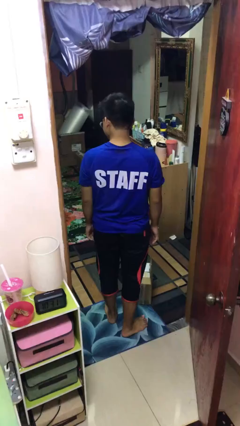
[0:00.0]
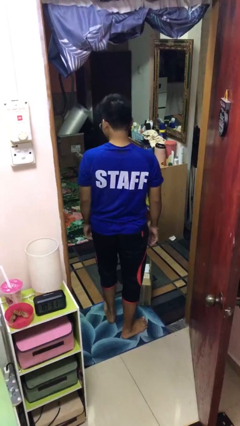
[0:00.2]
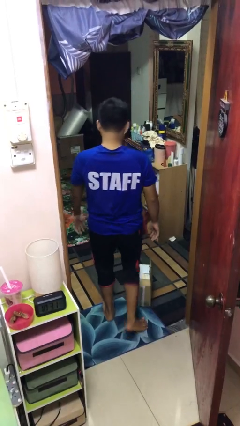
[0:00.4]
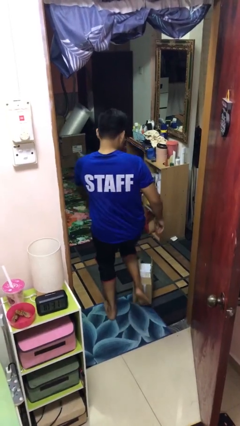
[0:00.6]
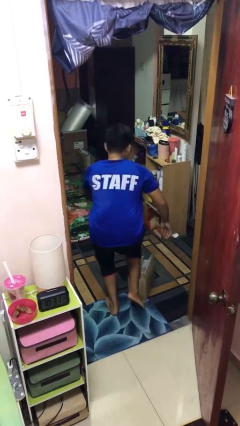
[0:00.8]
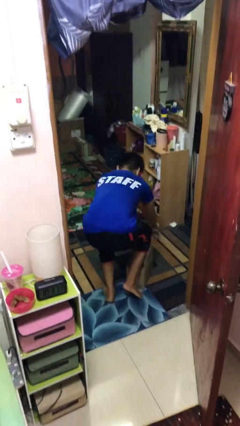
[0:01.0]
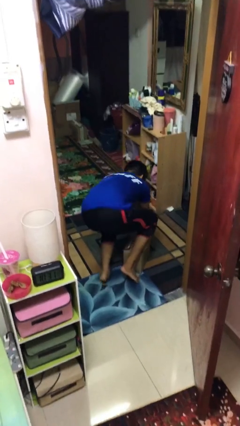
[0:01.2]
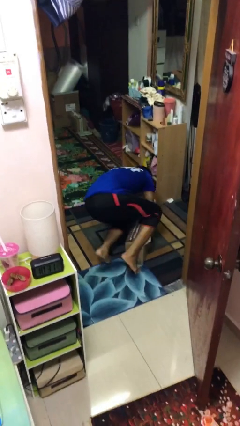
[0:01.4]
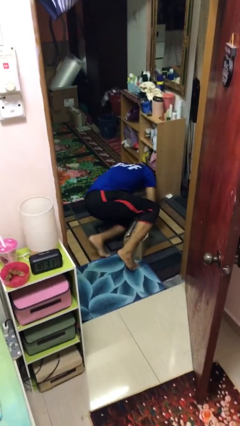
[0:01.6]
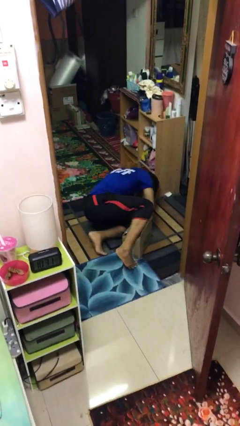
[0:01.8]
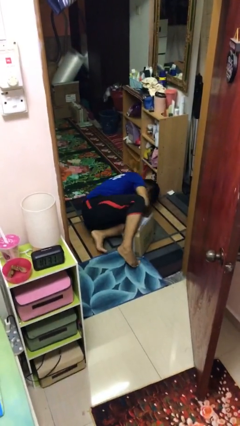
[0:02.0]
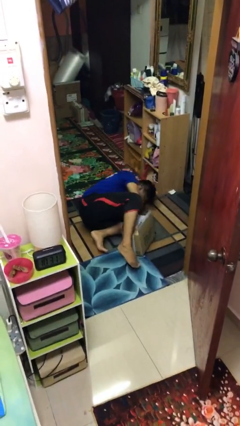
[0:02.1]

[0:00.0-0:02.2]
person trips on object on floor

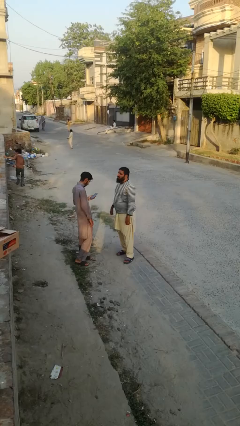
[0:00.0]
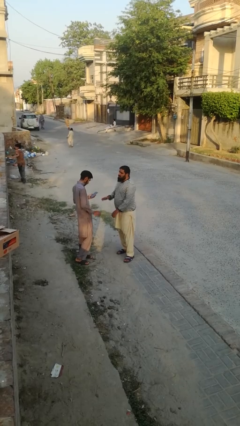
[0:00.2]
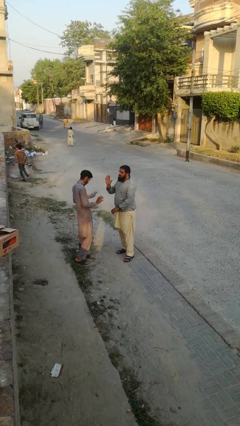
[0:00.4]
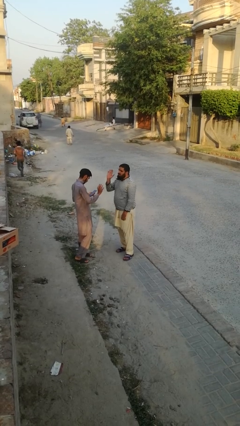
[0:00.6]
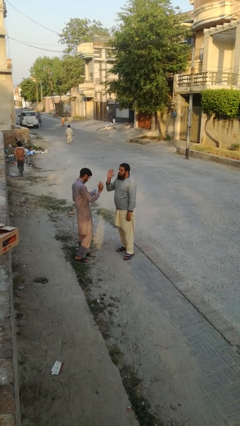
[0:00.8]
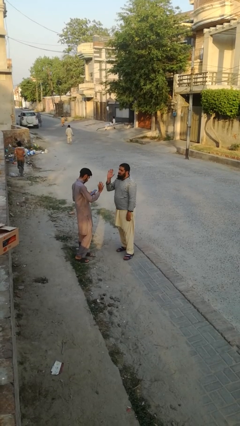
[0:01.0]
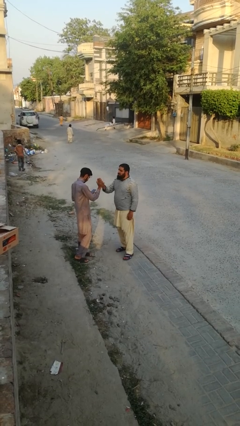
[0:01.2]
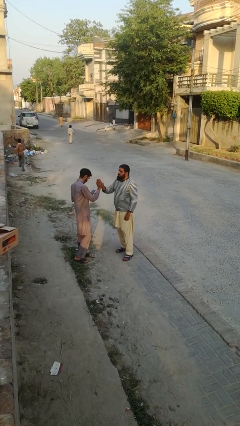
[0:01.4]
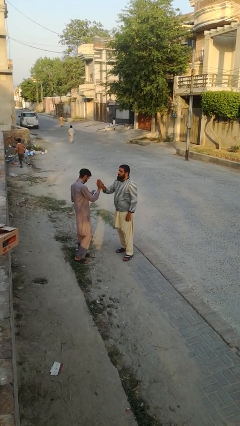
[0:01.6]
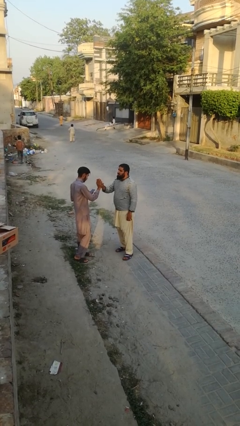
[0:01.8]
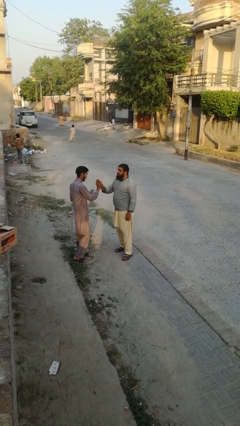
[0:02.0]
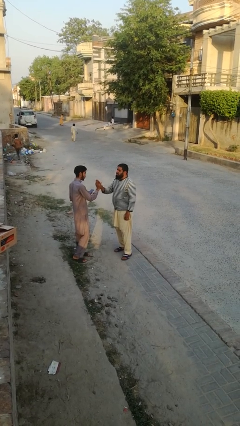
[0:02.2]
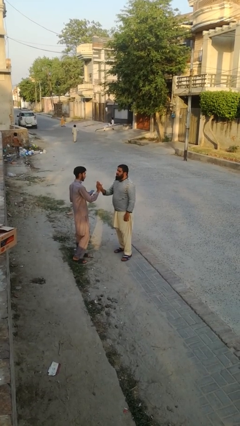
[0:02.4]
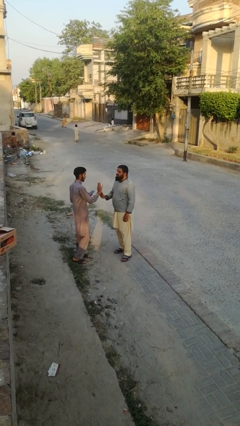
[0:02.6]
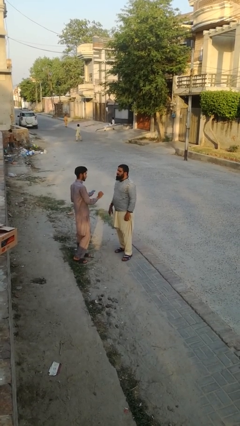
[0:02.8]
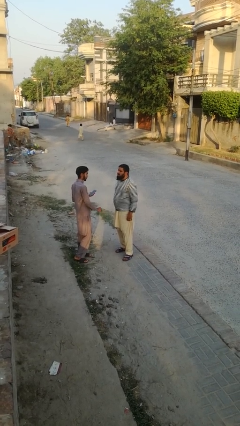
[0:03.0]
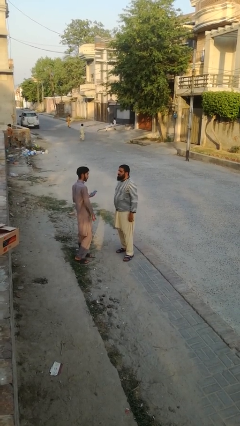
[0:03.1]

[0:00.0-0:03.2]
person highfives hand

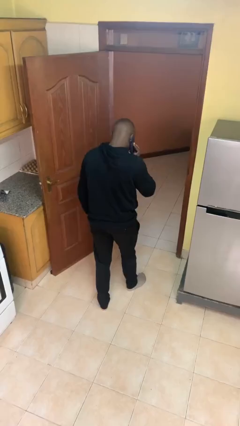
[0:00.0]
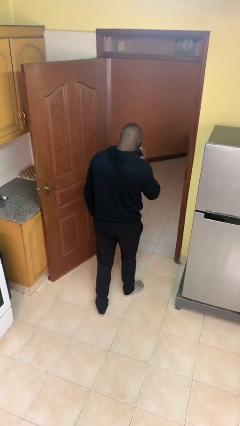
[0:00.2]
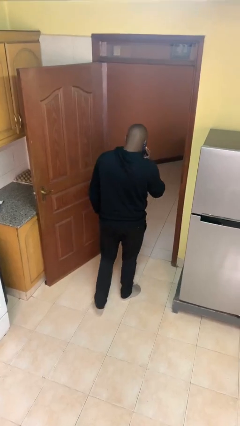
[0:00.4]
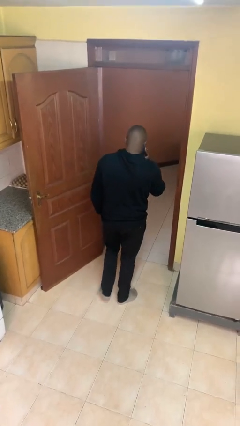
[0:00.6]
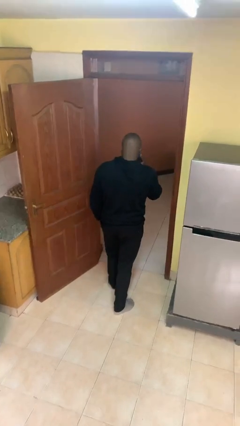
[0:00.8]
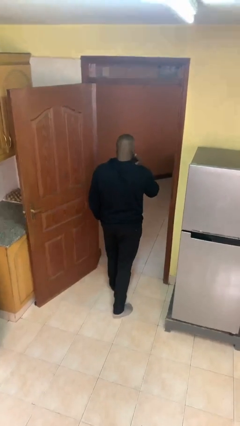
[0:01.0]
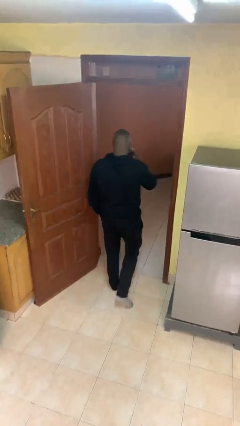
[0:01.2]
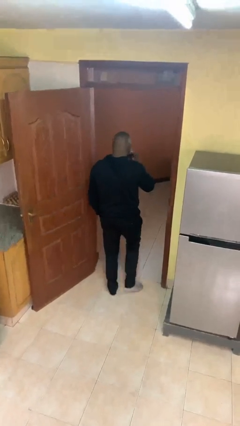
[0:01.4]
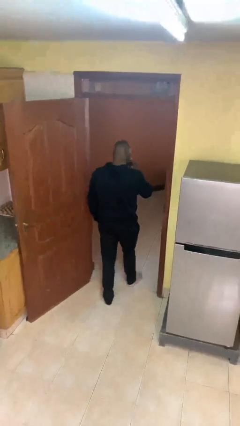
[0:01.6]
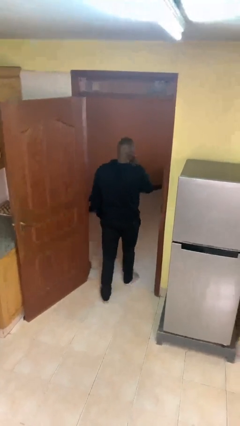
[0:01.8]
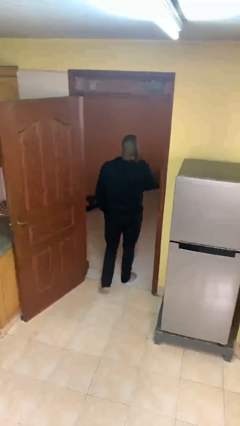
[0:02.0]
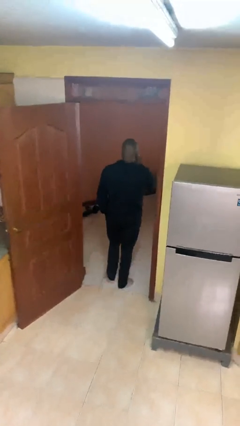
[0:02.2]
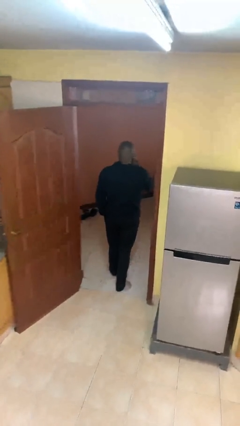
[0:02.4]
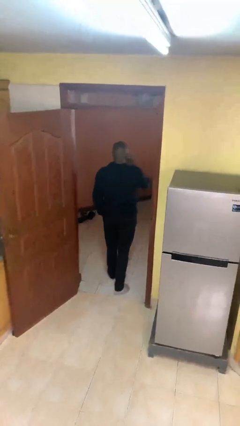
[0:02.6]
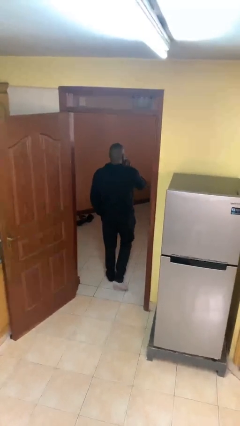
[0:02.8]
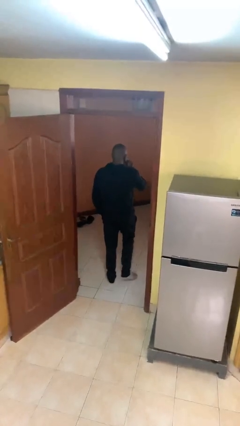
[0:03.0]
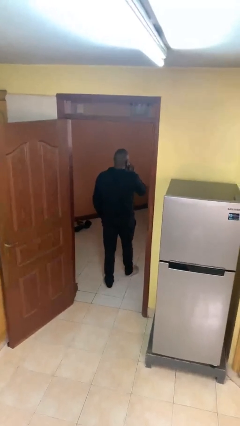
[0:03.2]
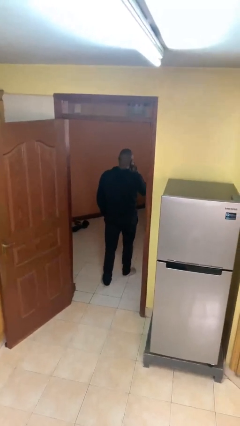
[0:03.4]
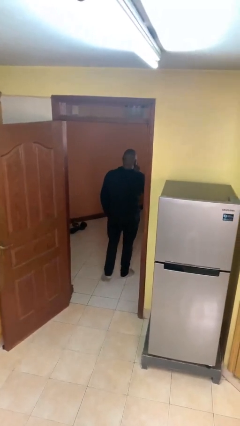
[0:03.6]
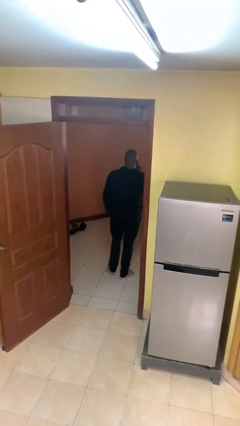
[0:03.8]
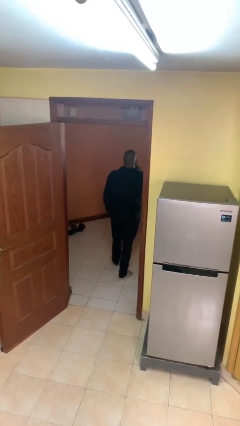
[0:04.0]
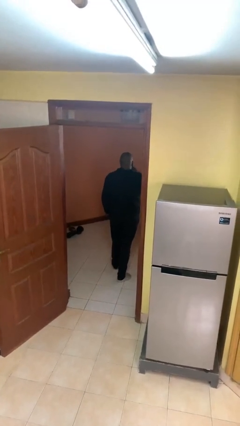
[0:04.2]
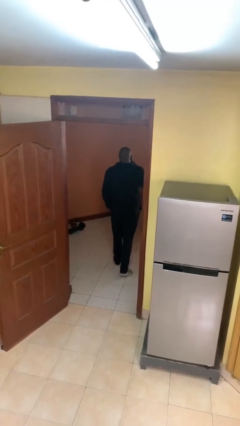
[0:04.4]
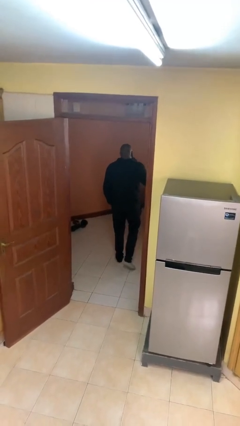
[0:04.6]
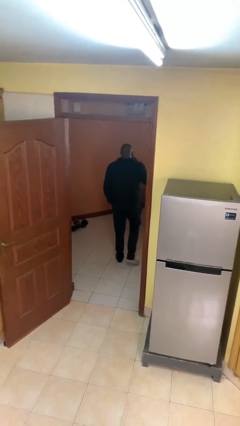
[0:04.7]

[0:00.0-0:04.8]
person exits scene through structure

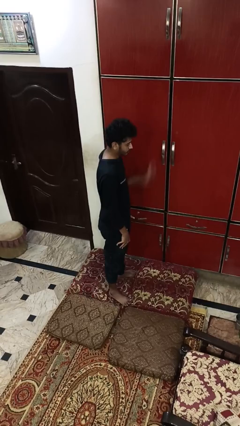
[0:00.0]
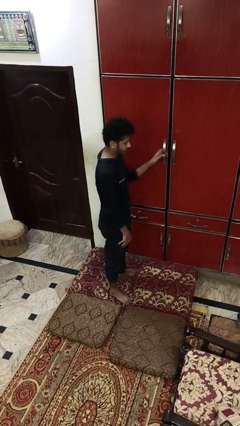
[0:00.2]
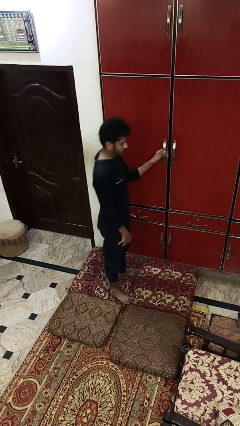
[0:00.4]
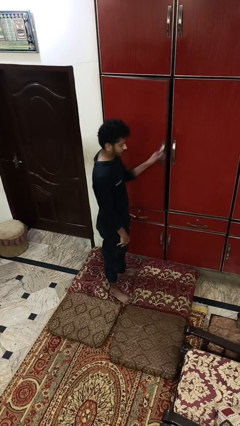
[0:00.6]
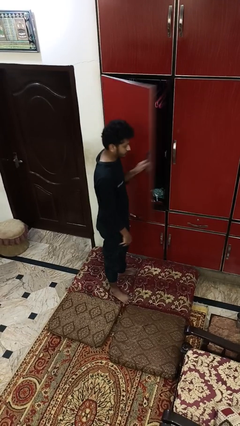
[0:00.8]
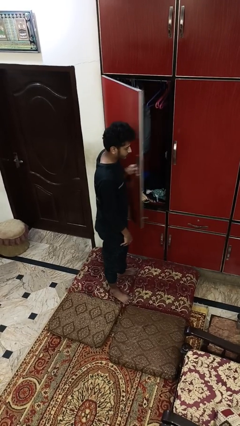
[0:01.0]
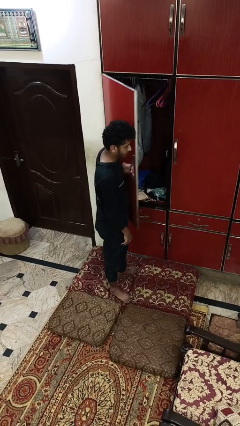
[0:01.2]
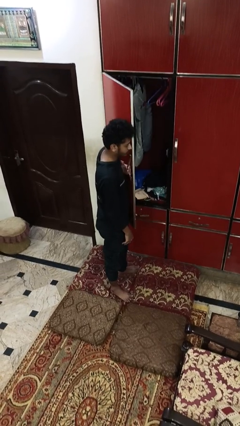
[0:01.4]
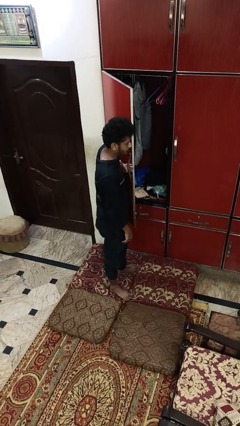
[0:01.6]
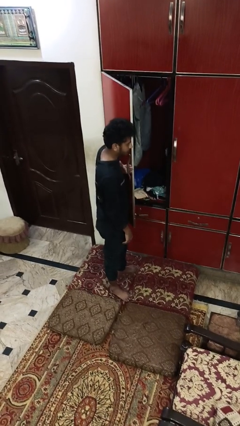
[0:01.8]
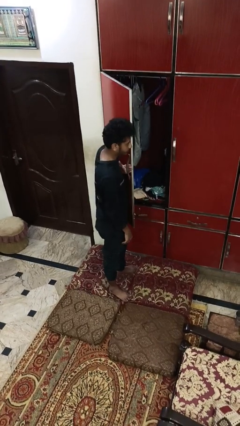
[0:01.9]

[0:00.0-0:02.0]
person opens closet door

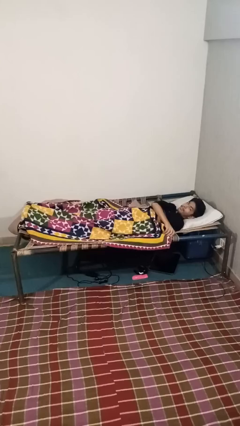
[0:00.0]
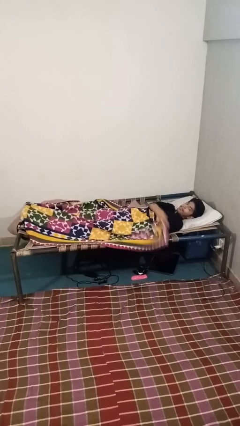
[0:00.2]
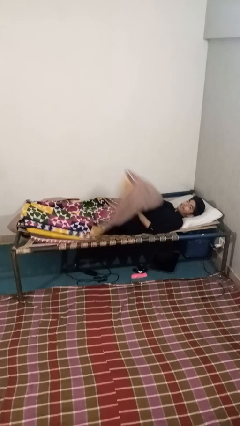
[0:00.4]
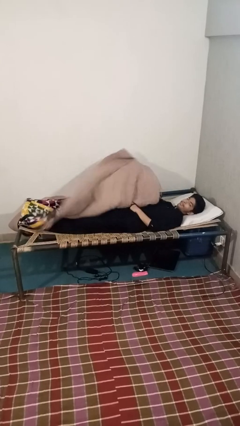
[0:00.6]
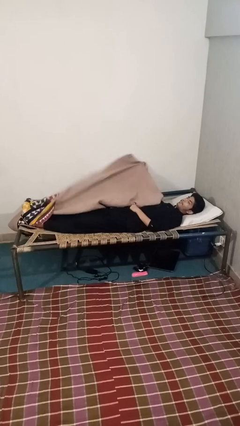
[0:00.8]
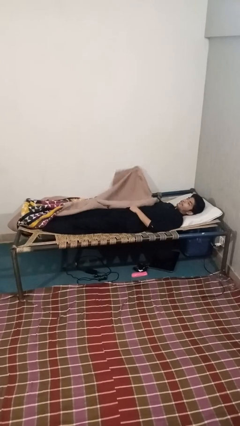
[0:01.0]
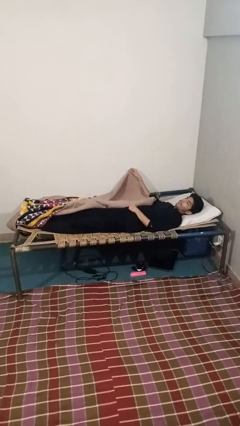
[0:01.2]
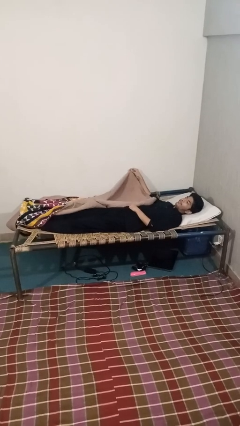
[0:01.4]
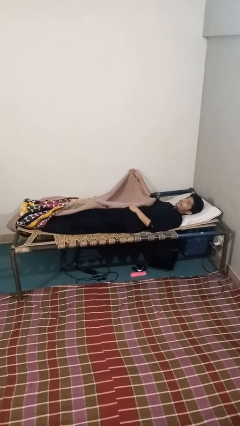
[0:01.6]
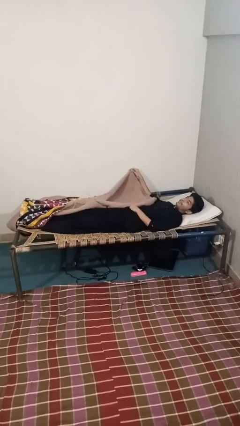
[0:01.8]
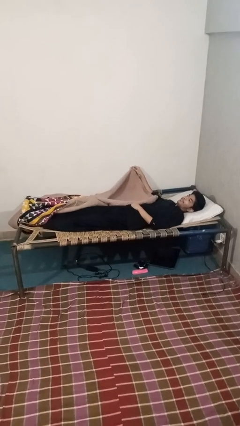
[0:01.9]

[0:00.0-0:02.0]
person uncovers with bedsheets

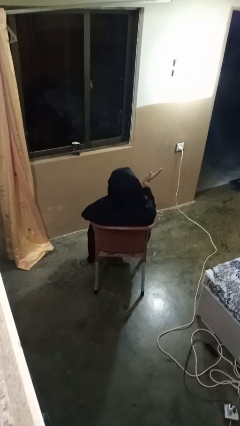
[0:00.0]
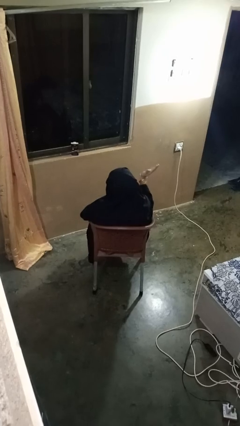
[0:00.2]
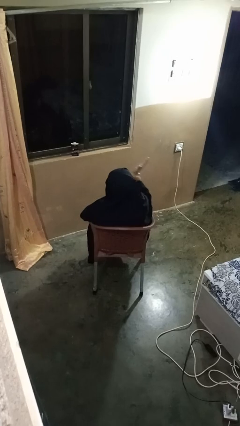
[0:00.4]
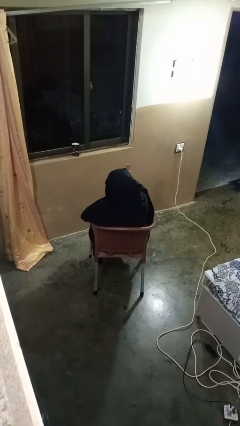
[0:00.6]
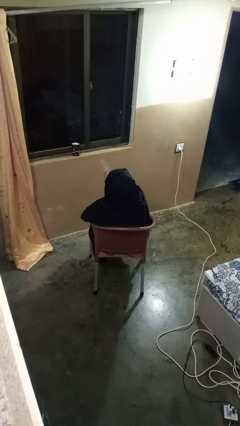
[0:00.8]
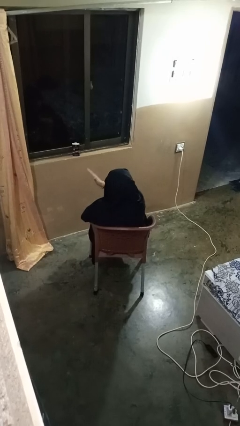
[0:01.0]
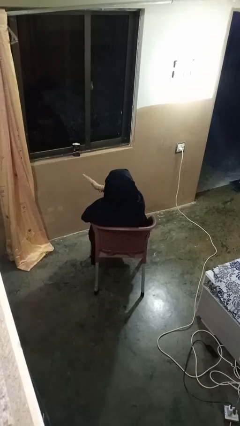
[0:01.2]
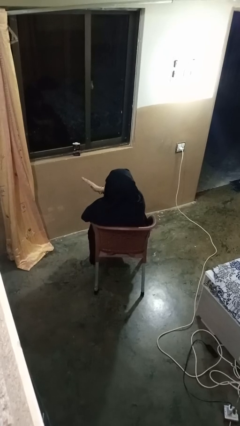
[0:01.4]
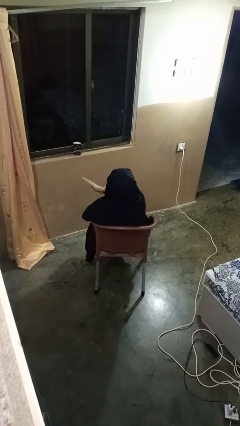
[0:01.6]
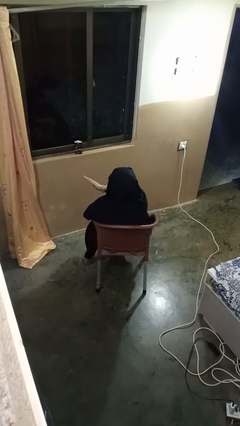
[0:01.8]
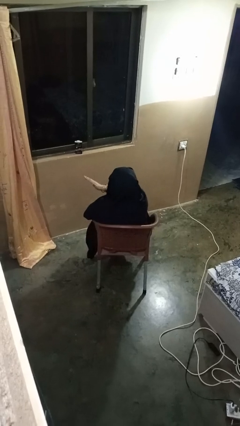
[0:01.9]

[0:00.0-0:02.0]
person gestures swipe left

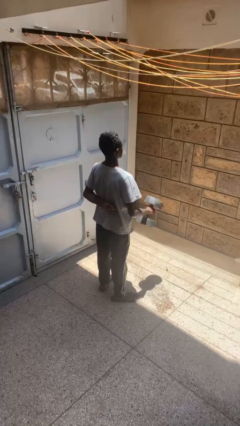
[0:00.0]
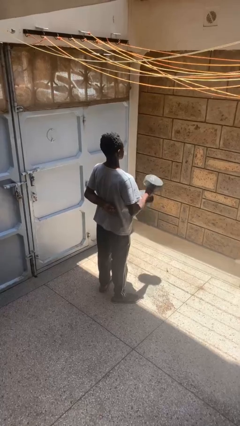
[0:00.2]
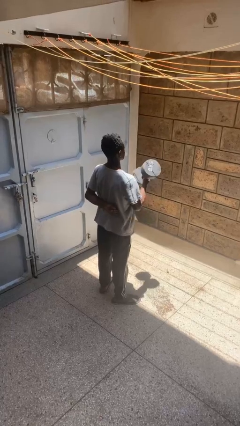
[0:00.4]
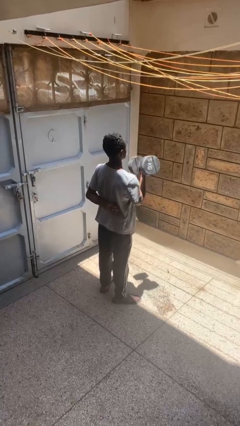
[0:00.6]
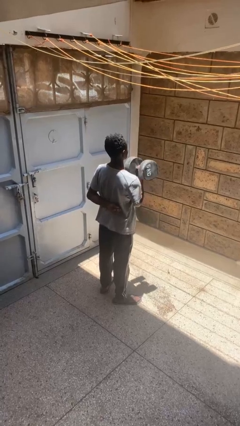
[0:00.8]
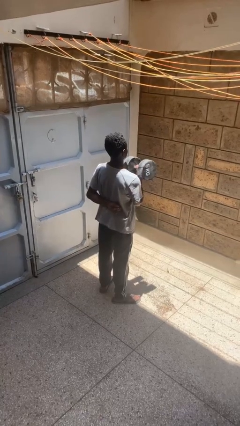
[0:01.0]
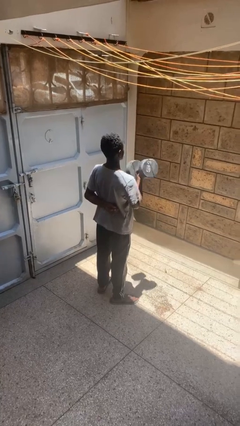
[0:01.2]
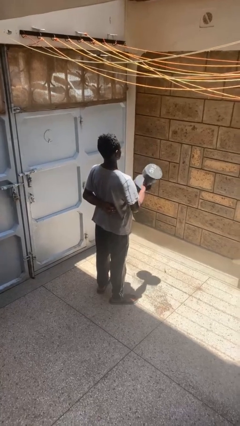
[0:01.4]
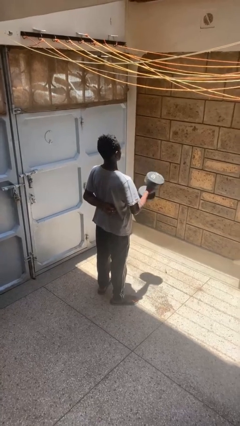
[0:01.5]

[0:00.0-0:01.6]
person lifts dumbbells
